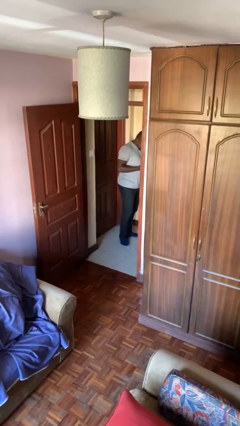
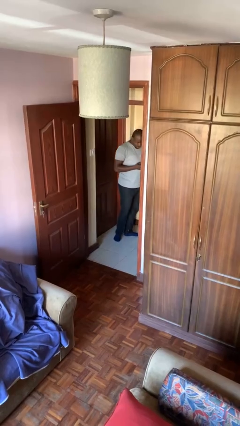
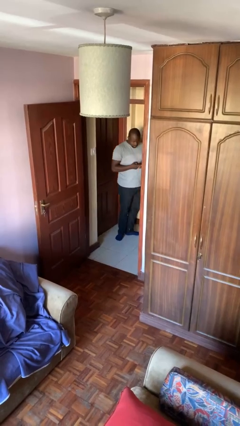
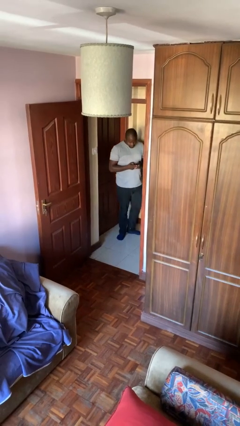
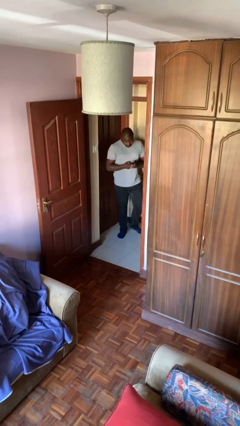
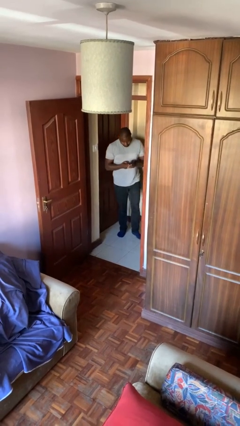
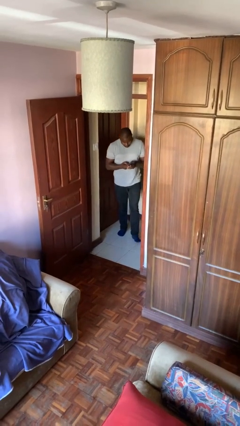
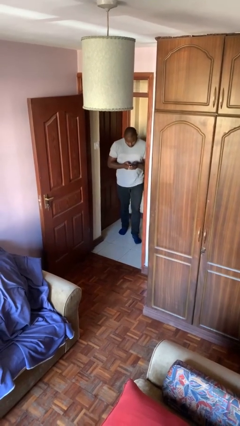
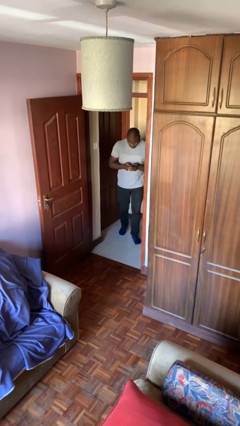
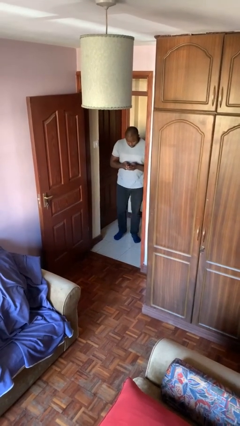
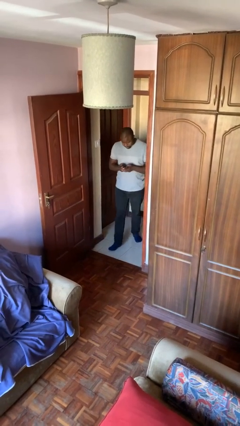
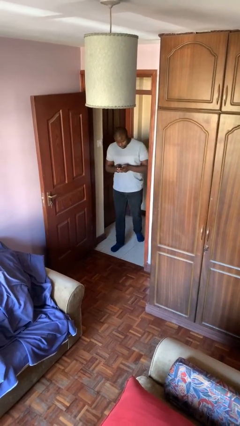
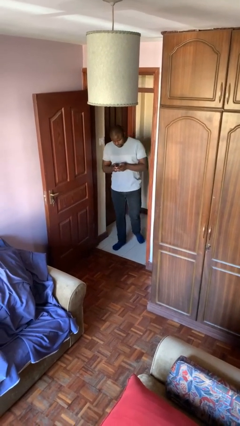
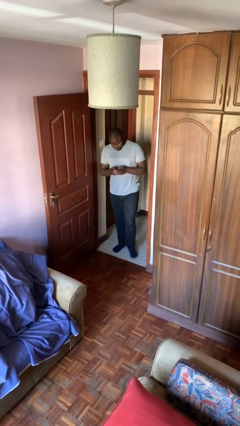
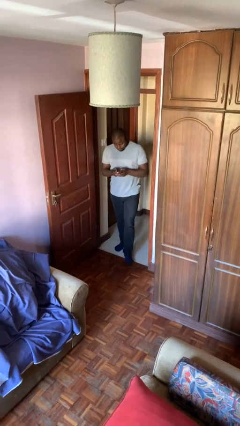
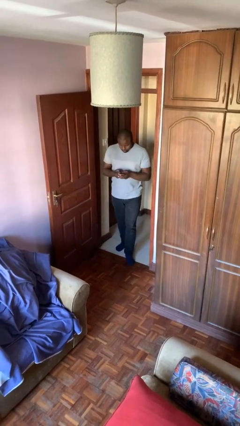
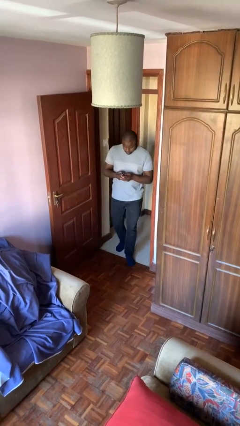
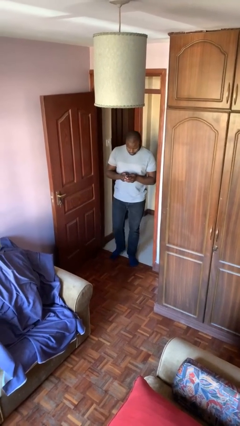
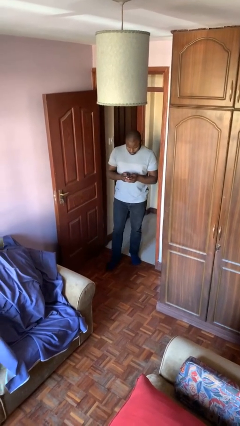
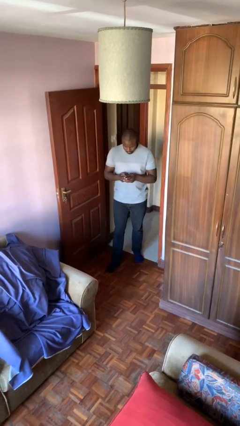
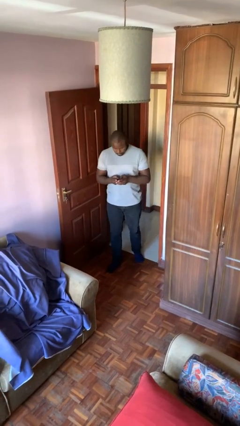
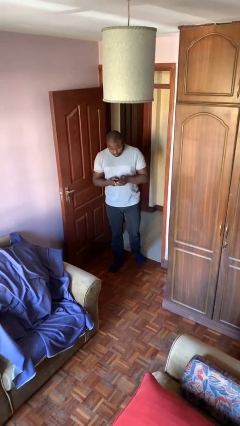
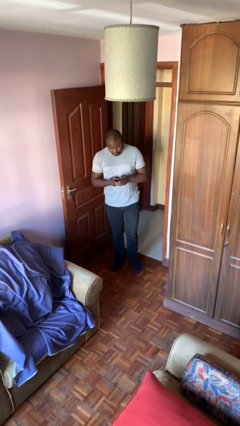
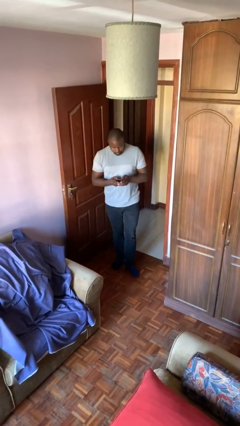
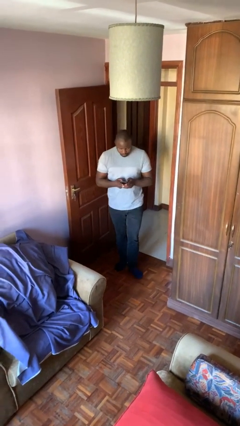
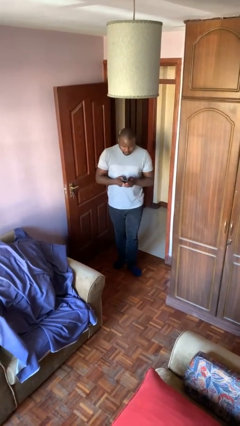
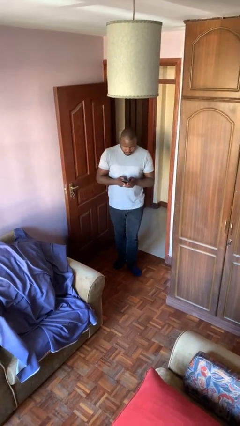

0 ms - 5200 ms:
person enters scene through structure

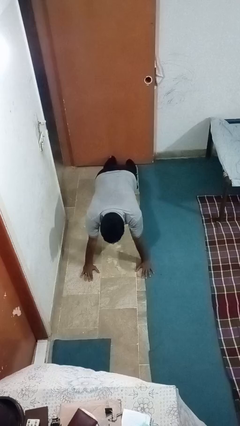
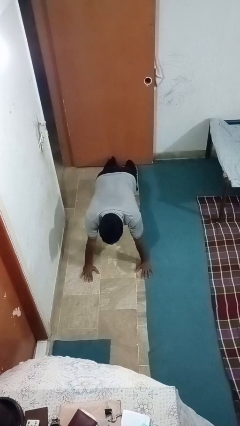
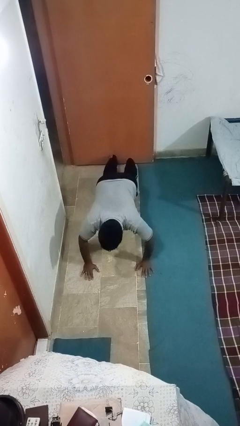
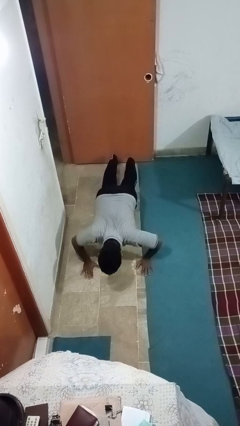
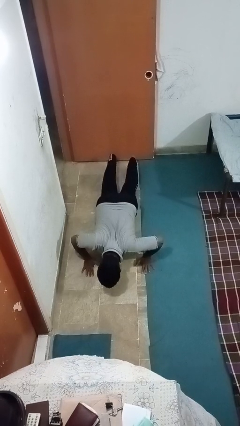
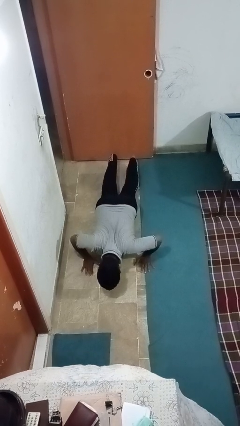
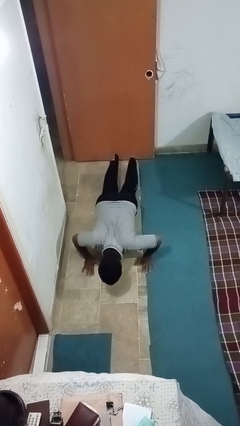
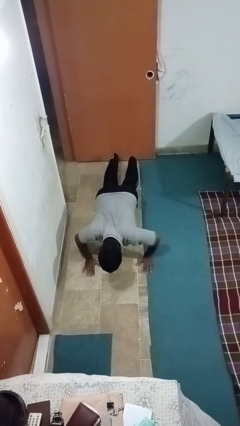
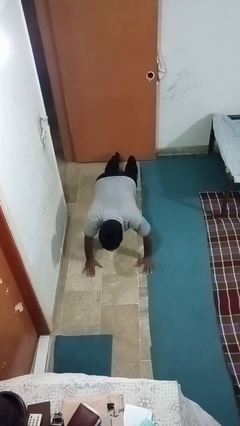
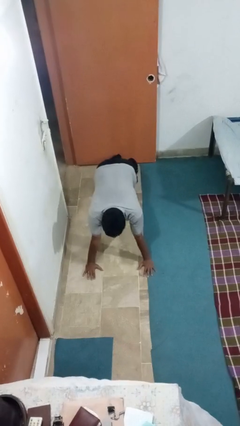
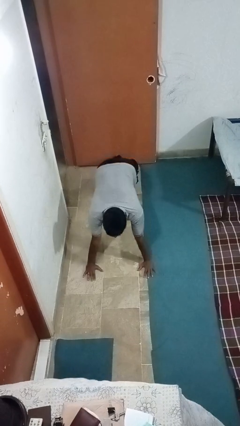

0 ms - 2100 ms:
person exercises with pushup

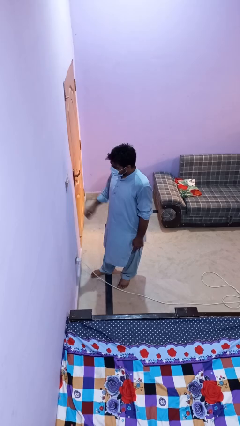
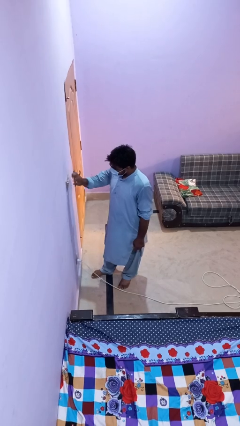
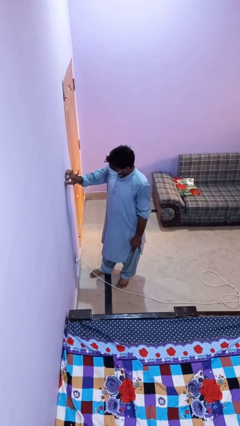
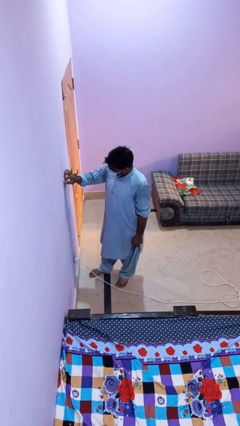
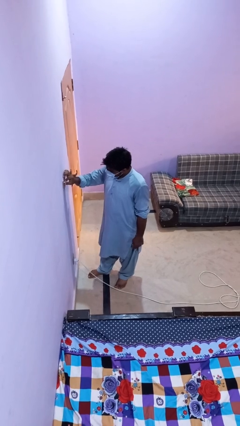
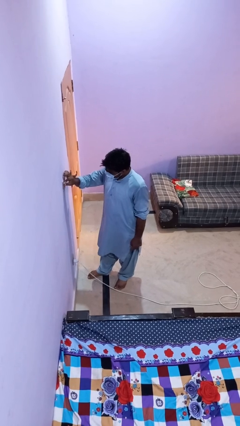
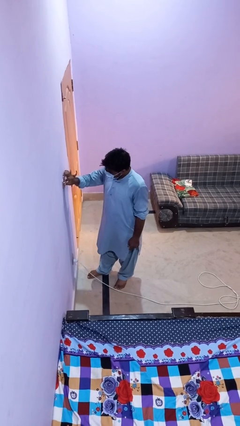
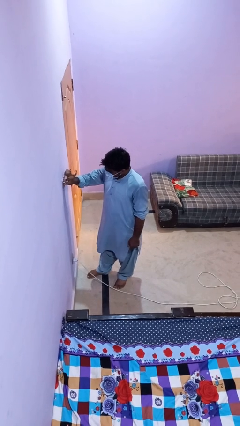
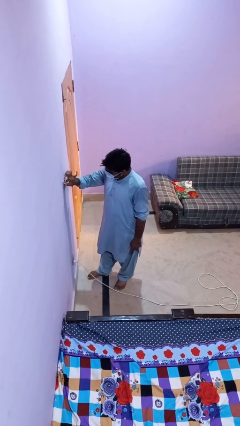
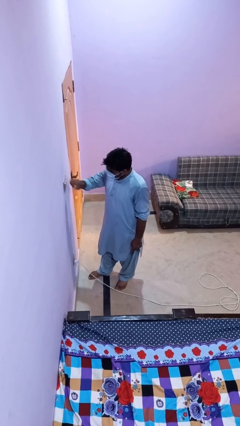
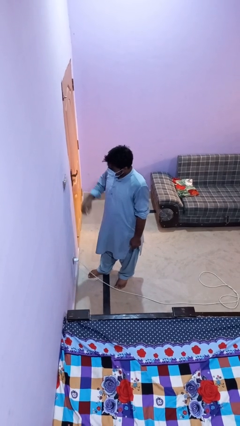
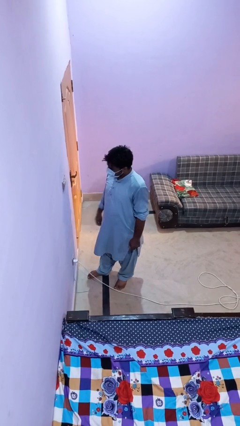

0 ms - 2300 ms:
person adjusts thermostat

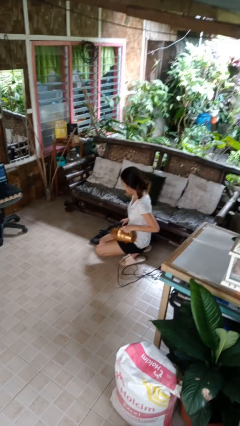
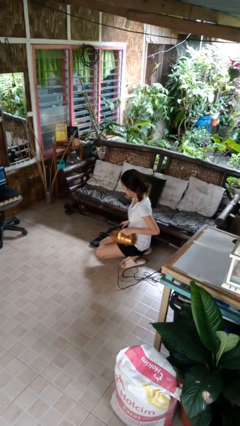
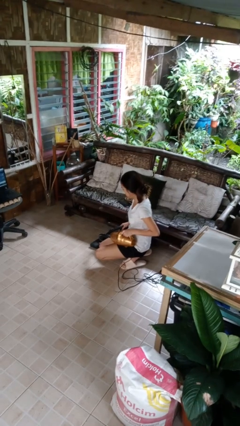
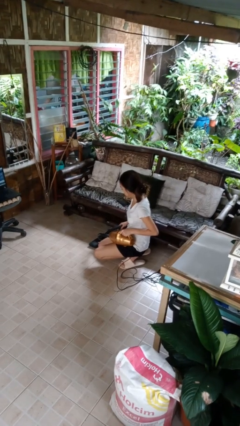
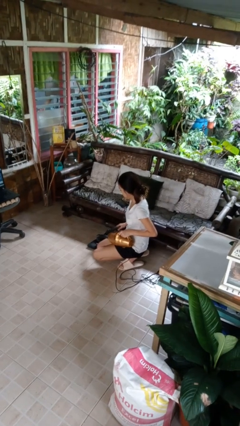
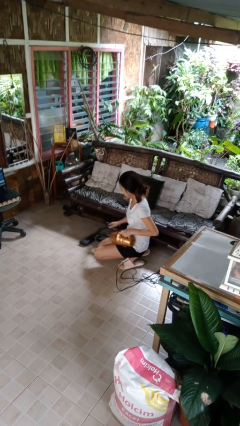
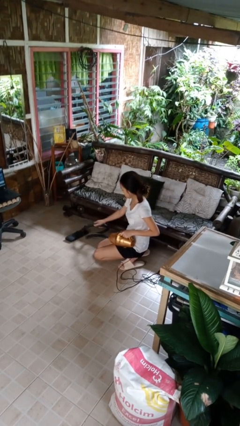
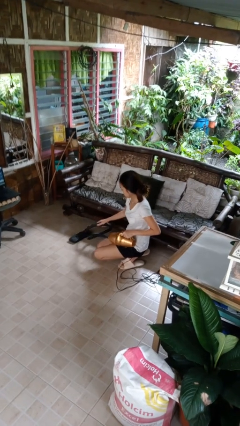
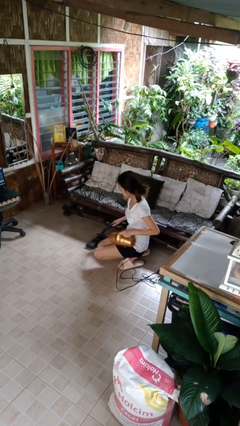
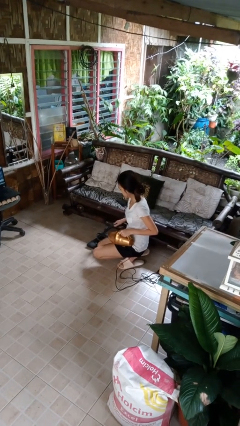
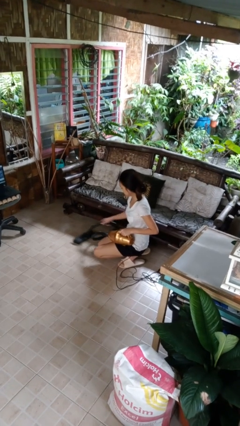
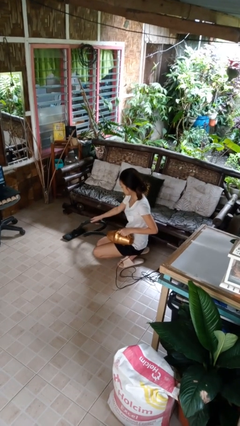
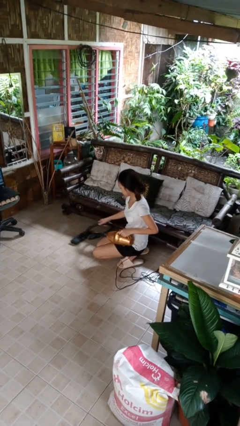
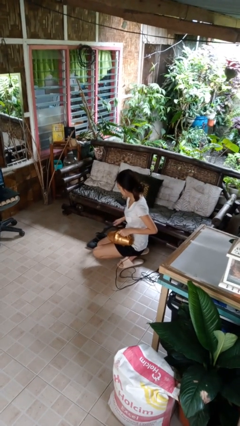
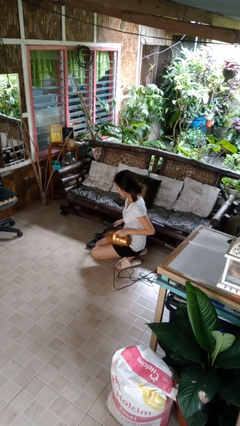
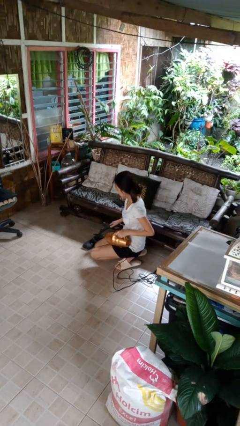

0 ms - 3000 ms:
person vacuums carpet

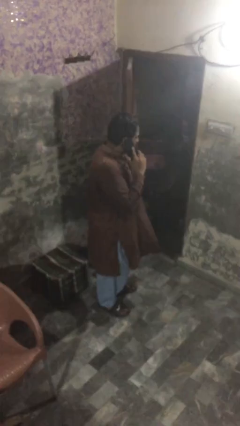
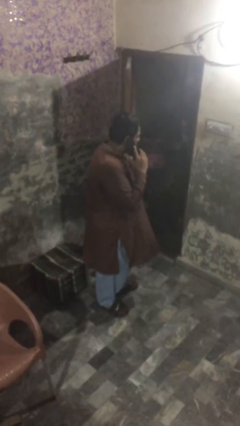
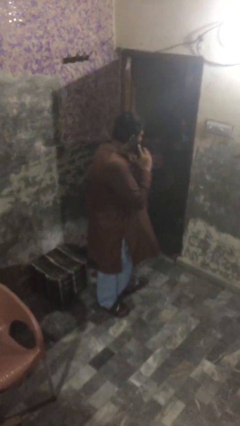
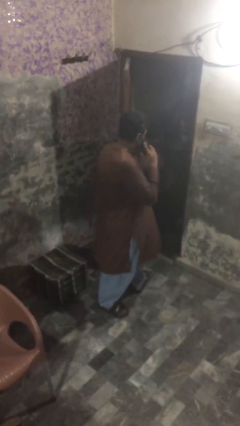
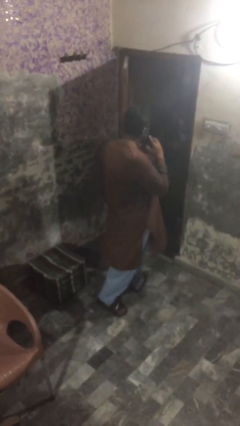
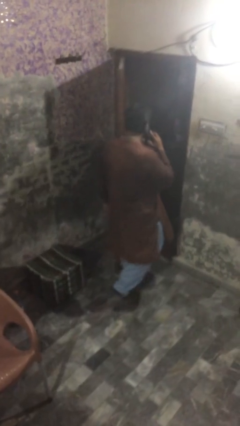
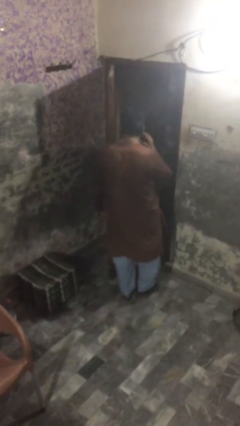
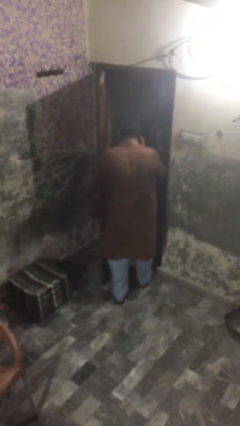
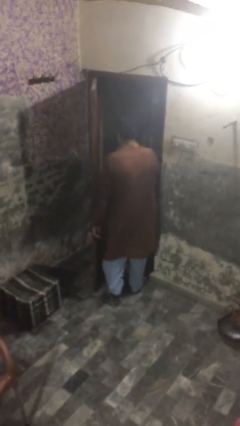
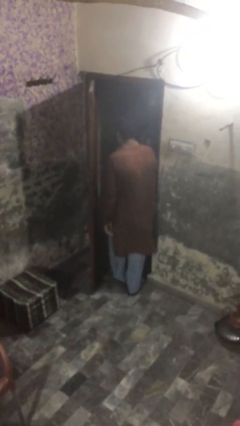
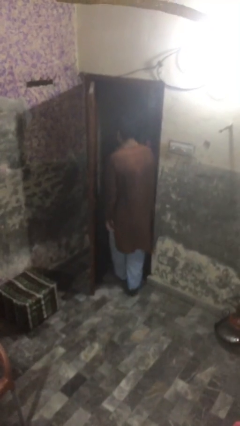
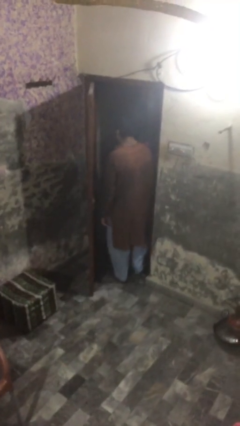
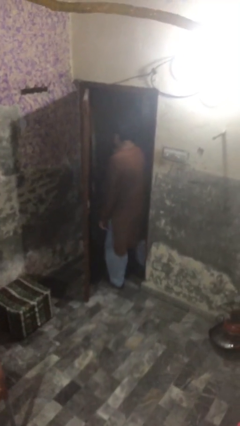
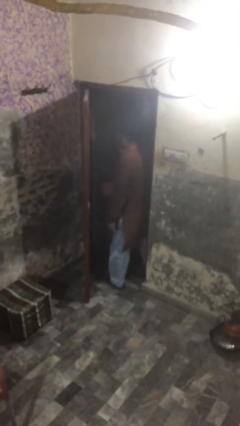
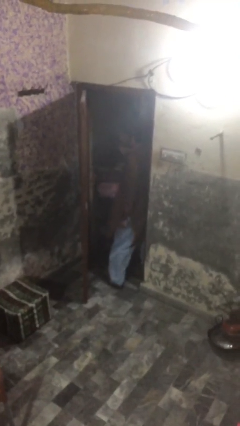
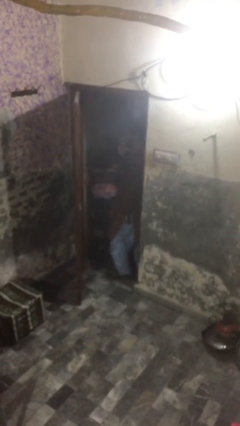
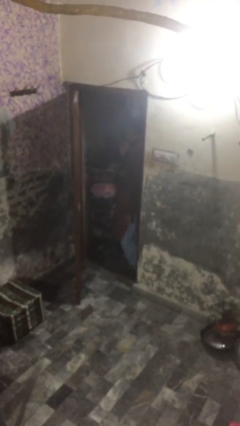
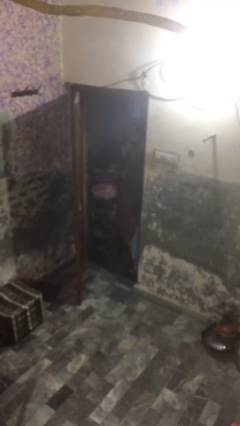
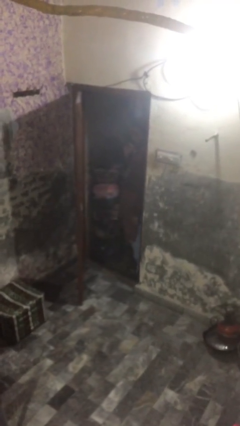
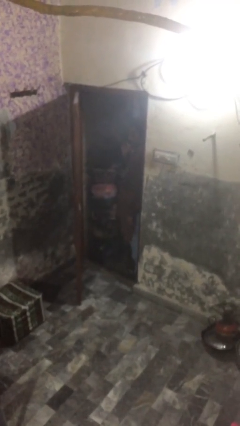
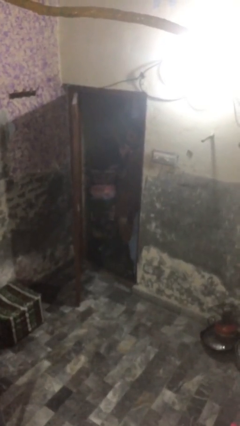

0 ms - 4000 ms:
person exits scene through structure

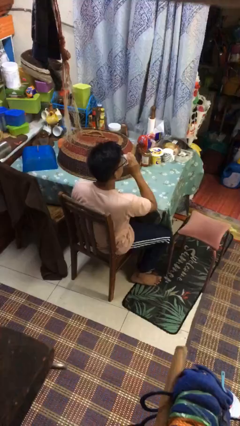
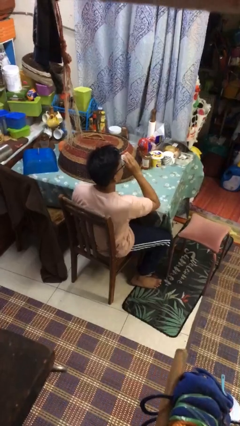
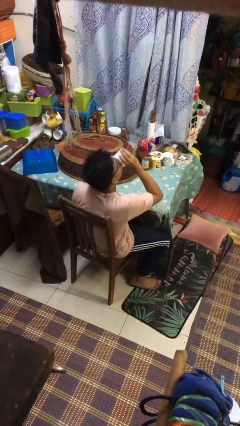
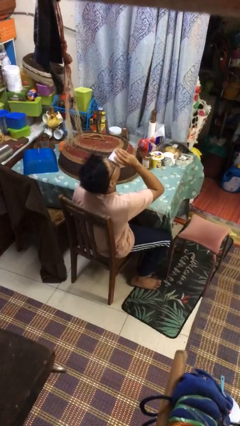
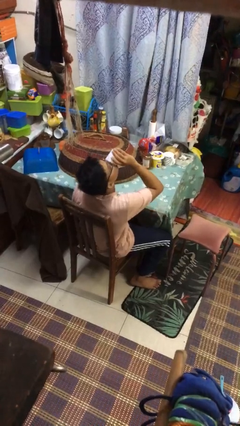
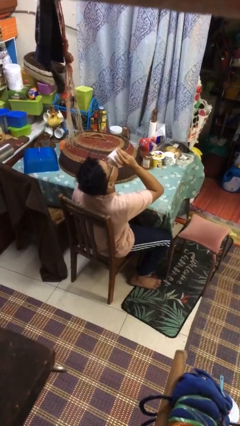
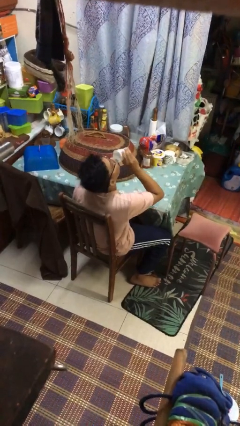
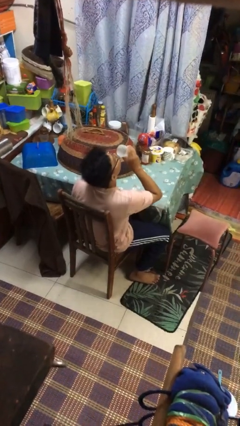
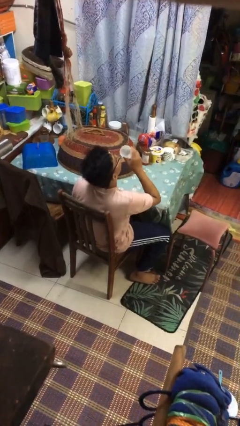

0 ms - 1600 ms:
person drinks from shotglass
